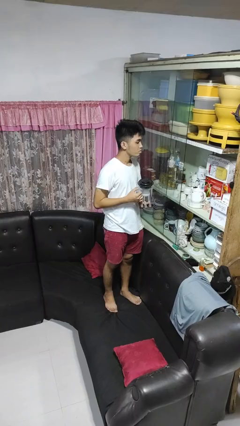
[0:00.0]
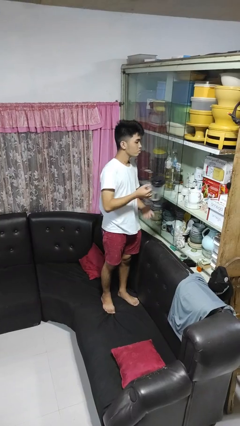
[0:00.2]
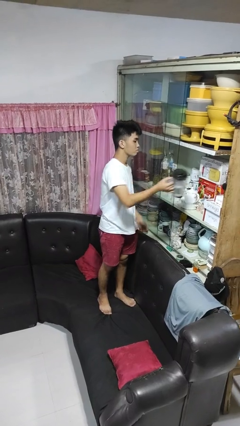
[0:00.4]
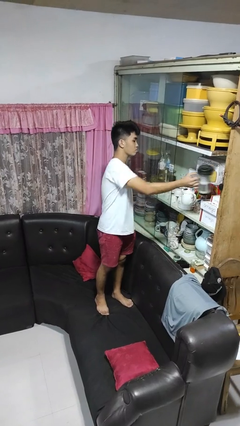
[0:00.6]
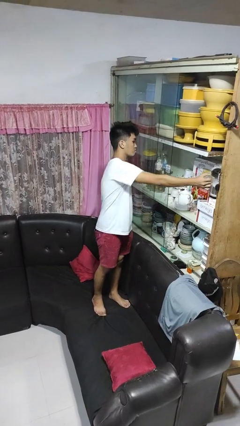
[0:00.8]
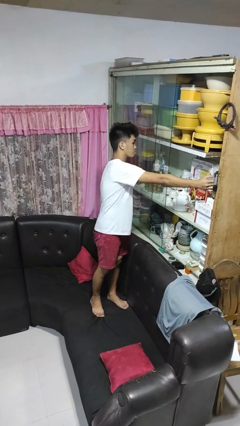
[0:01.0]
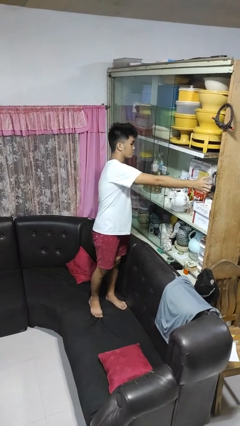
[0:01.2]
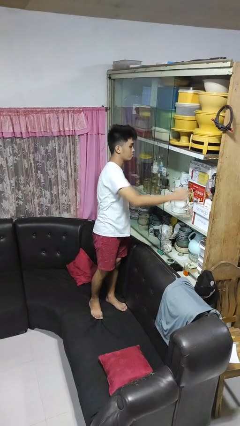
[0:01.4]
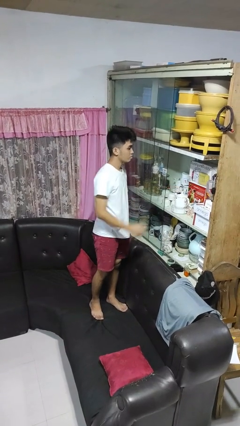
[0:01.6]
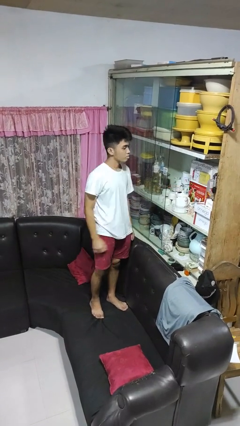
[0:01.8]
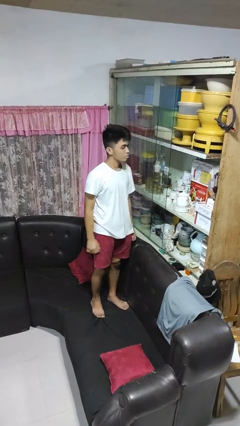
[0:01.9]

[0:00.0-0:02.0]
person puts down object into cabinet

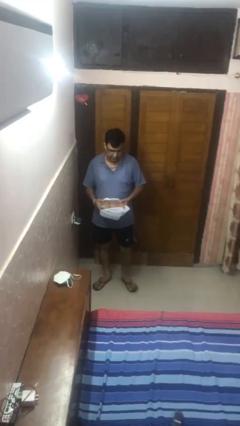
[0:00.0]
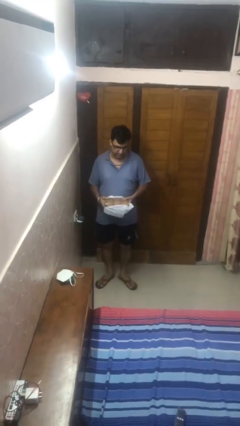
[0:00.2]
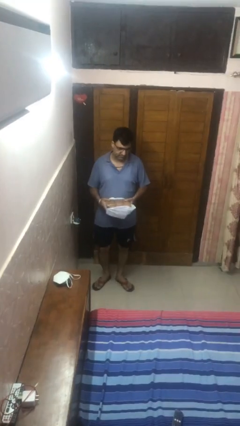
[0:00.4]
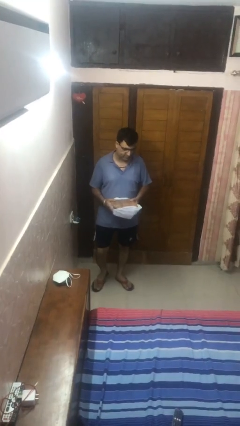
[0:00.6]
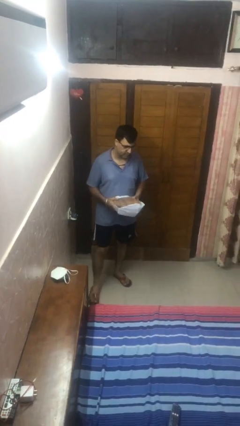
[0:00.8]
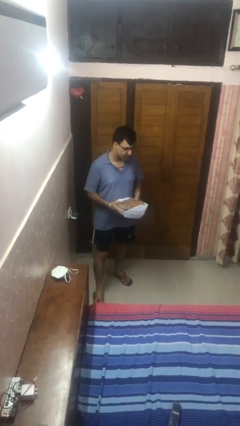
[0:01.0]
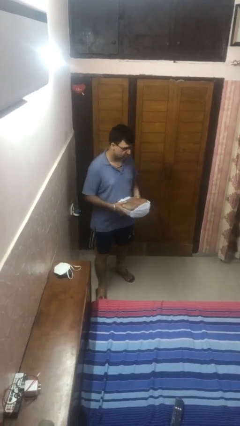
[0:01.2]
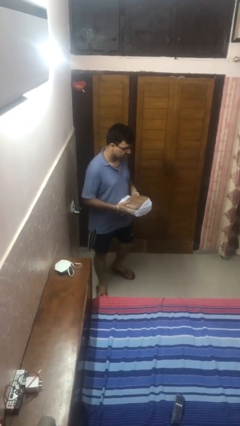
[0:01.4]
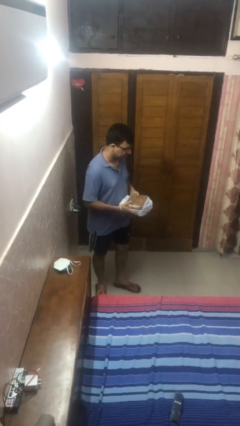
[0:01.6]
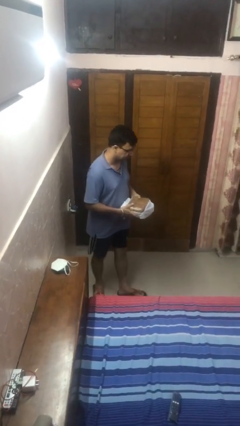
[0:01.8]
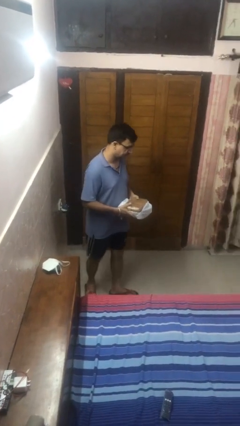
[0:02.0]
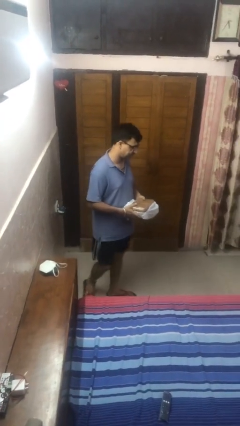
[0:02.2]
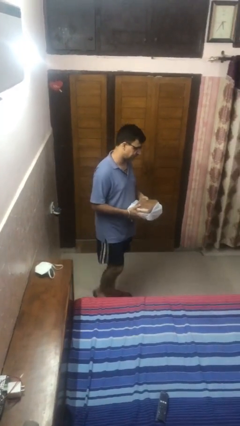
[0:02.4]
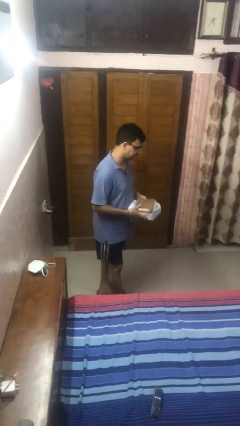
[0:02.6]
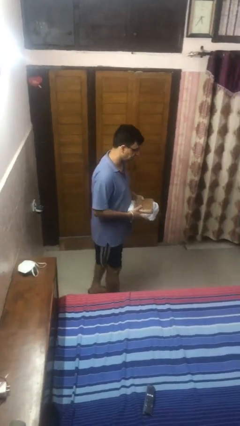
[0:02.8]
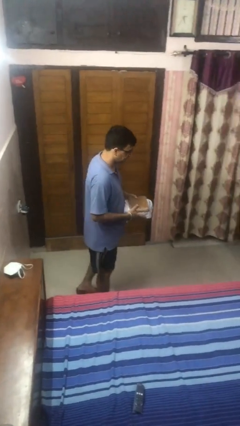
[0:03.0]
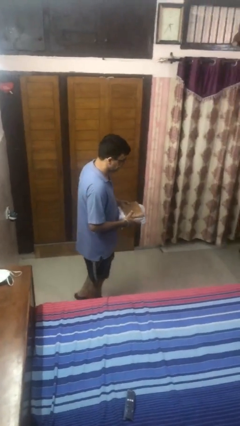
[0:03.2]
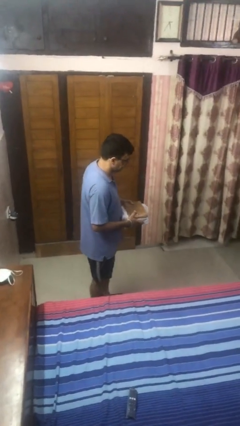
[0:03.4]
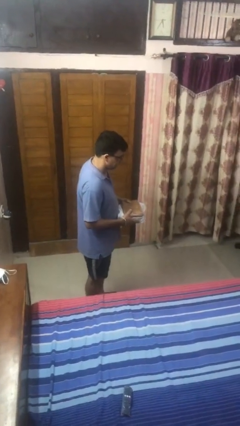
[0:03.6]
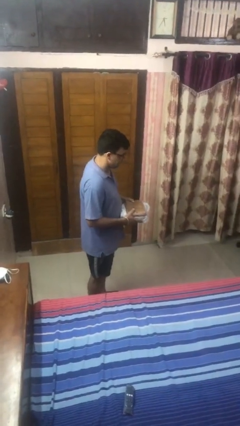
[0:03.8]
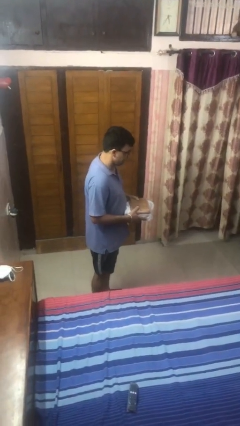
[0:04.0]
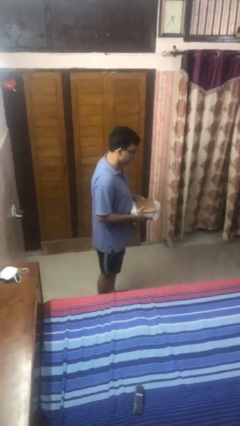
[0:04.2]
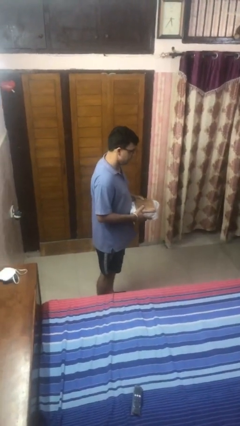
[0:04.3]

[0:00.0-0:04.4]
person carries groceries

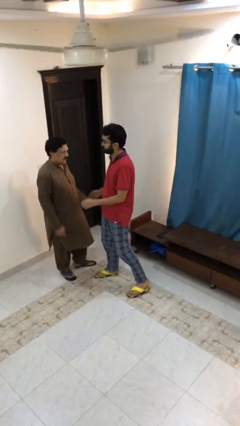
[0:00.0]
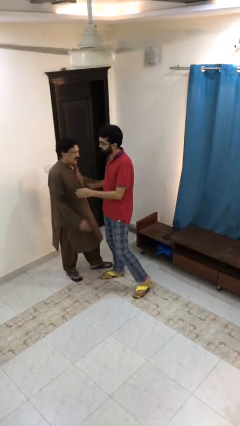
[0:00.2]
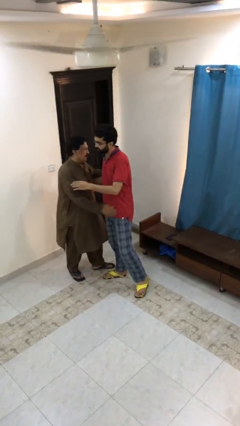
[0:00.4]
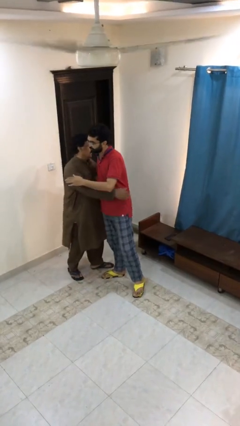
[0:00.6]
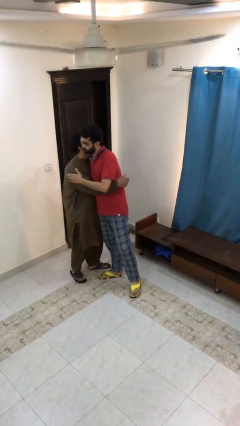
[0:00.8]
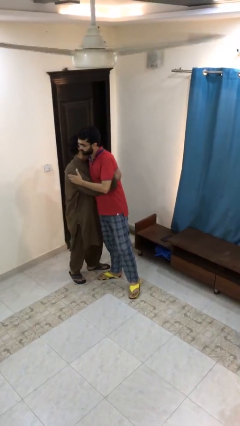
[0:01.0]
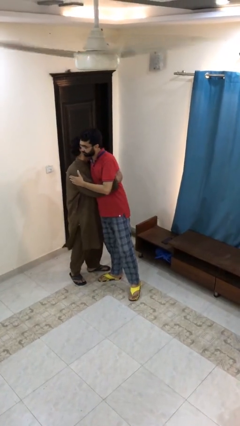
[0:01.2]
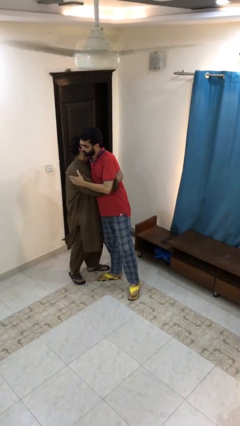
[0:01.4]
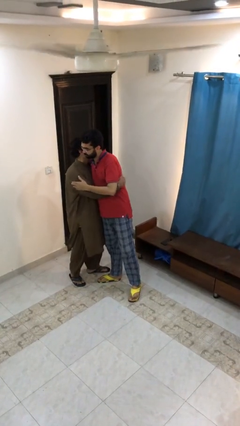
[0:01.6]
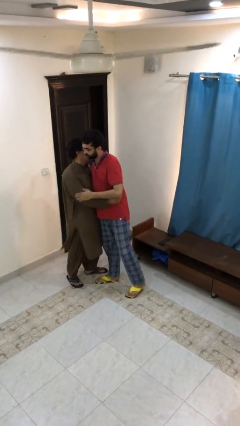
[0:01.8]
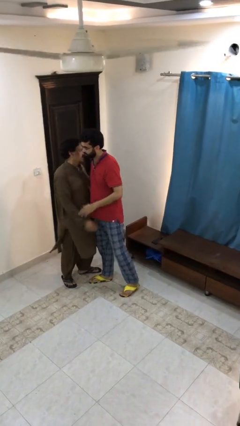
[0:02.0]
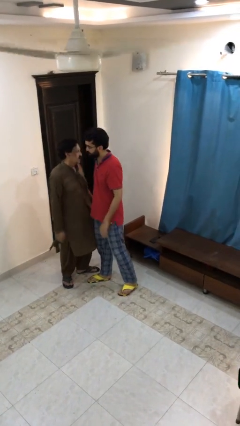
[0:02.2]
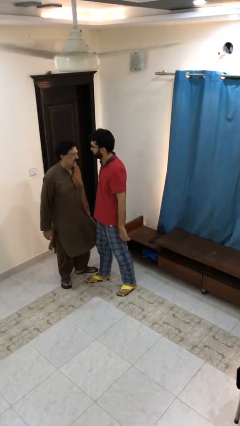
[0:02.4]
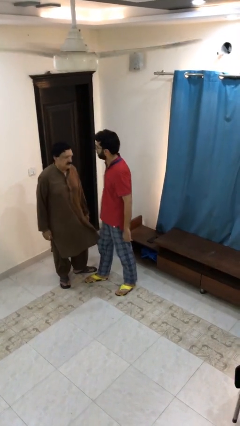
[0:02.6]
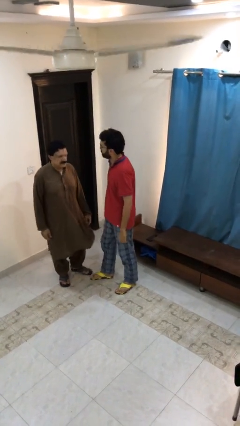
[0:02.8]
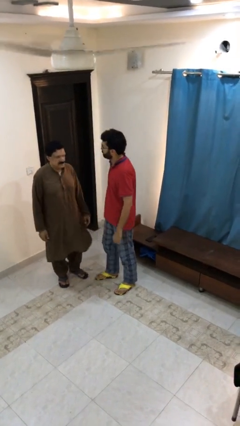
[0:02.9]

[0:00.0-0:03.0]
person embraces person

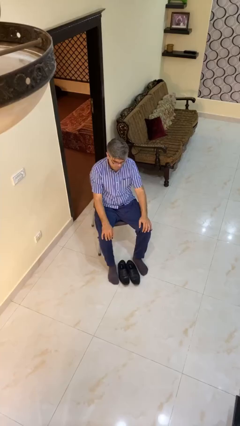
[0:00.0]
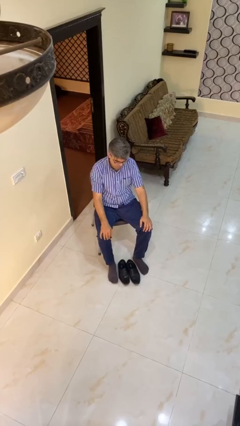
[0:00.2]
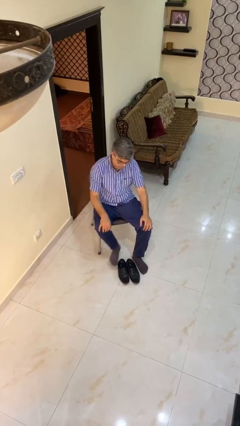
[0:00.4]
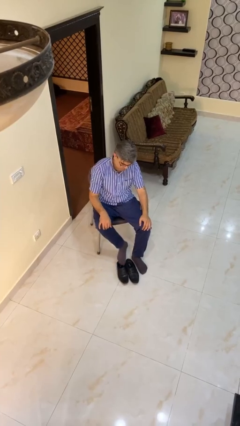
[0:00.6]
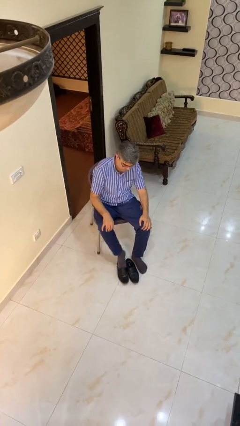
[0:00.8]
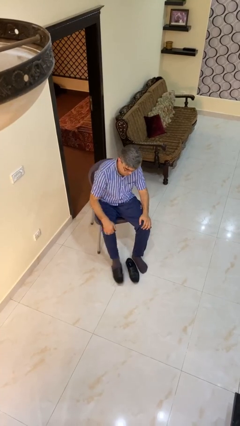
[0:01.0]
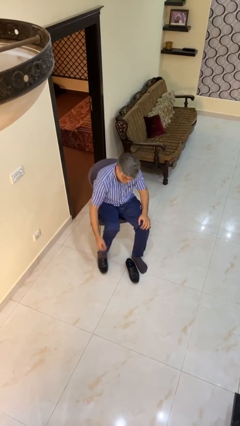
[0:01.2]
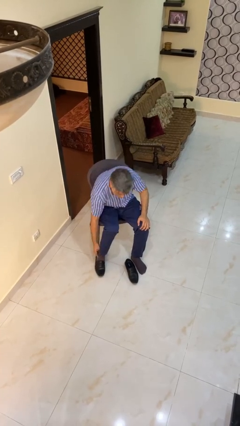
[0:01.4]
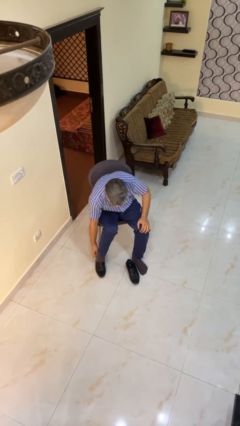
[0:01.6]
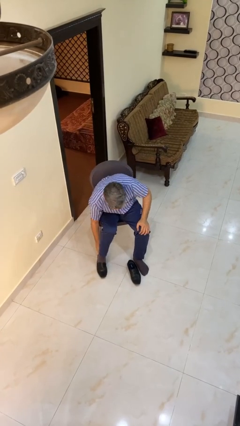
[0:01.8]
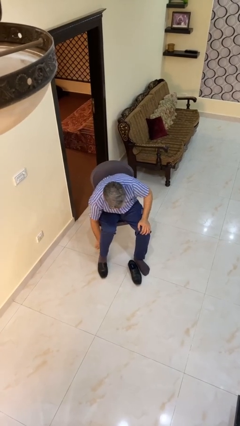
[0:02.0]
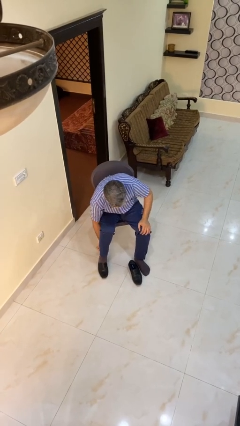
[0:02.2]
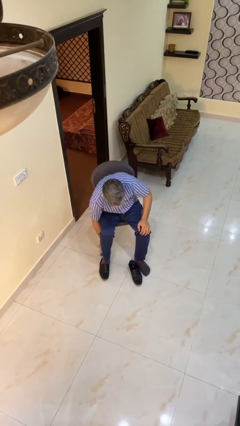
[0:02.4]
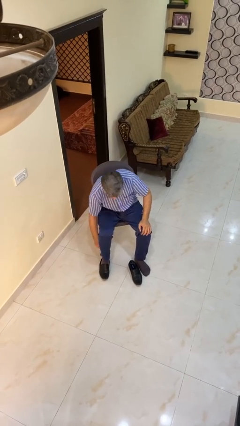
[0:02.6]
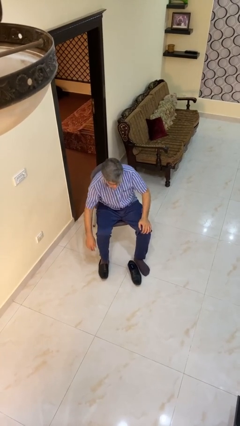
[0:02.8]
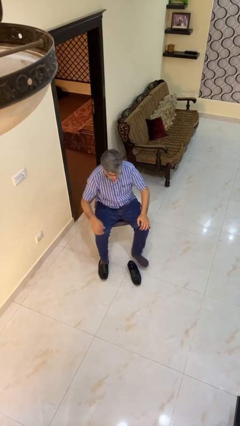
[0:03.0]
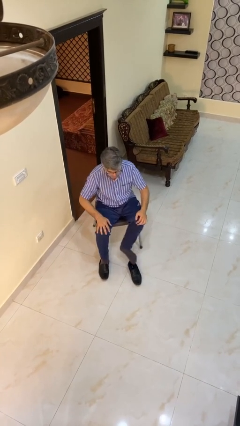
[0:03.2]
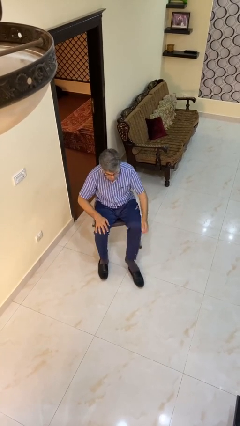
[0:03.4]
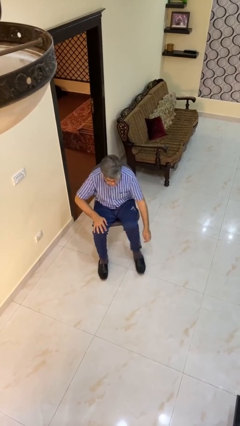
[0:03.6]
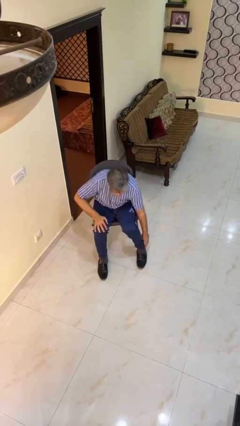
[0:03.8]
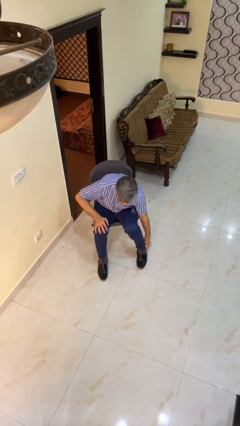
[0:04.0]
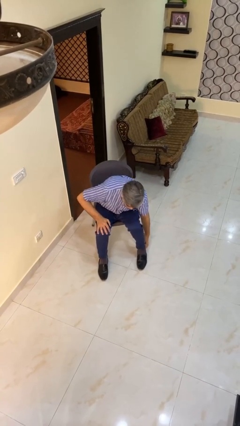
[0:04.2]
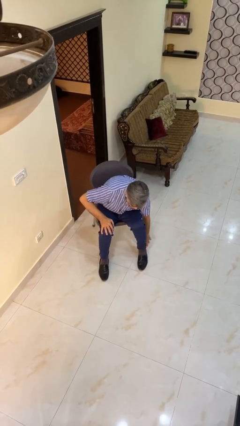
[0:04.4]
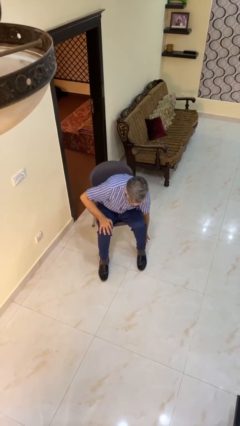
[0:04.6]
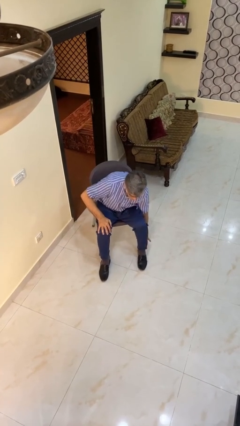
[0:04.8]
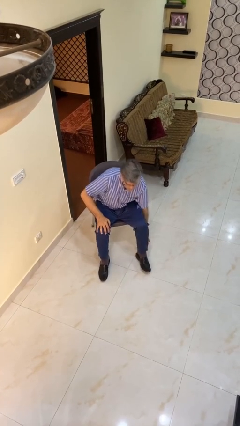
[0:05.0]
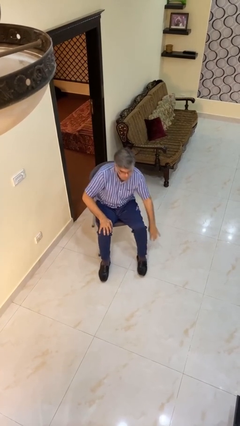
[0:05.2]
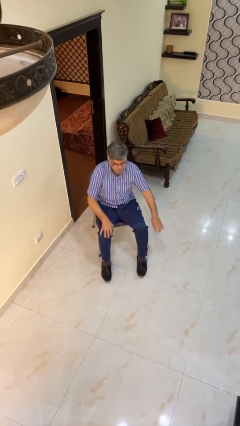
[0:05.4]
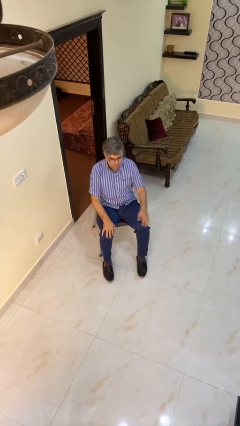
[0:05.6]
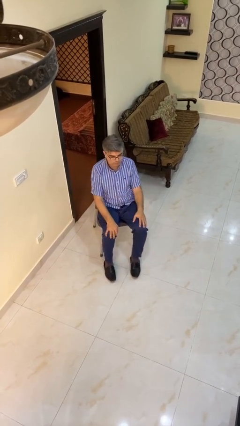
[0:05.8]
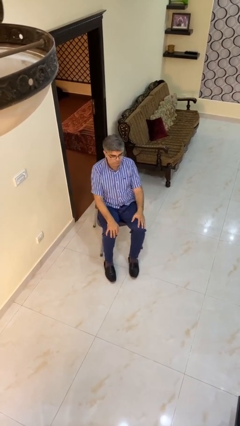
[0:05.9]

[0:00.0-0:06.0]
person puts on boots

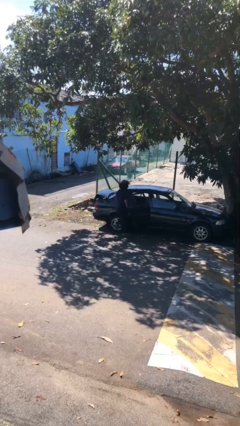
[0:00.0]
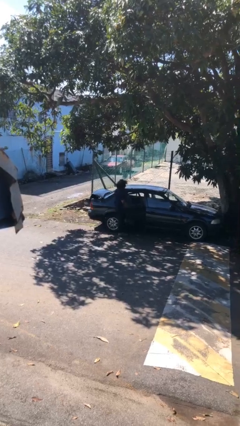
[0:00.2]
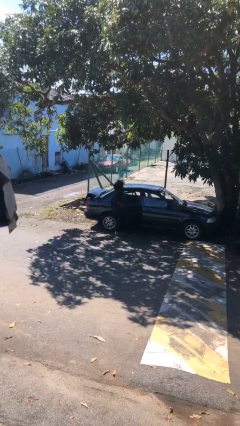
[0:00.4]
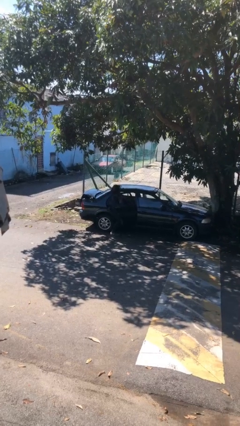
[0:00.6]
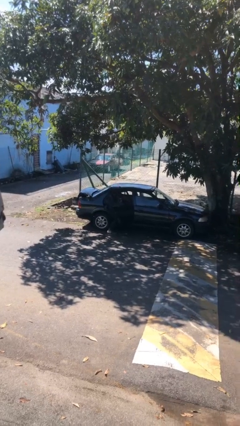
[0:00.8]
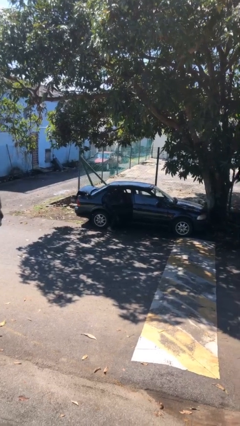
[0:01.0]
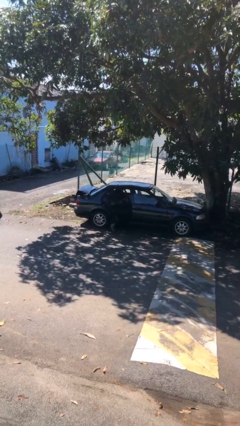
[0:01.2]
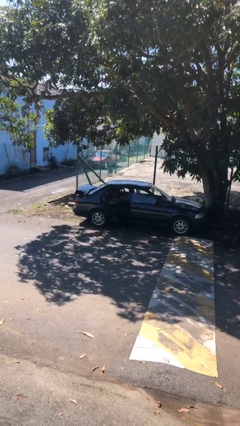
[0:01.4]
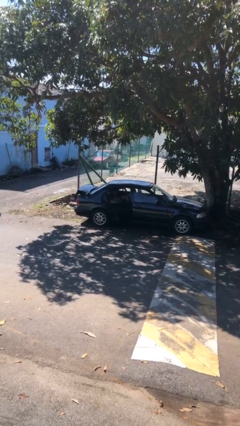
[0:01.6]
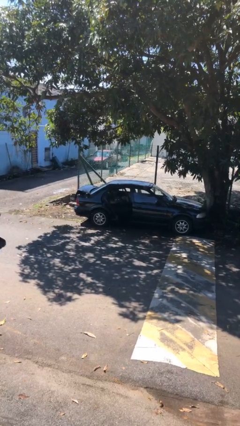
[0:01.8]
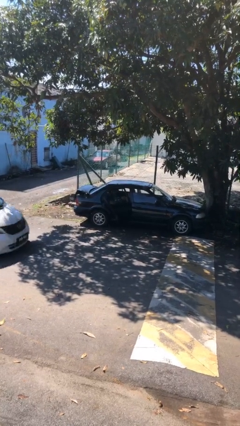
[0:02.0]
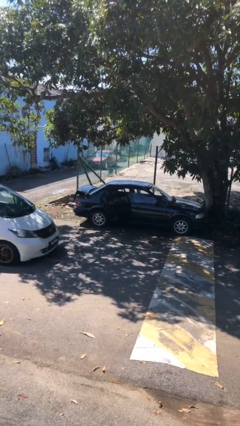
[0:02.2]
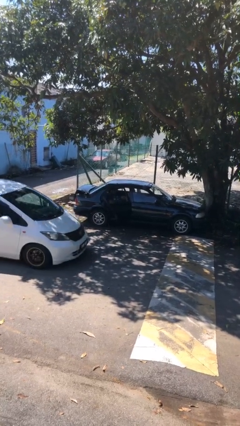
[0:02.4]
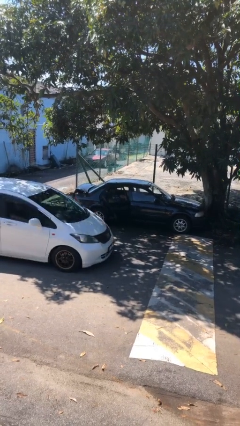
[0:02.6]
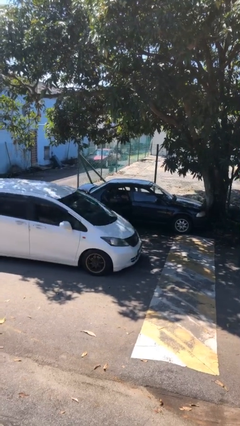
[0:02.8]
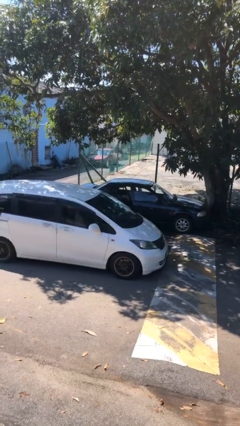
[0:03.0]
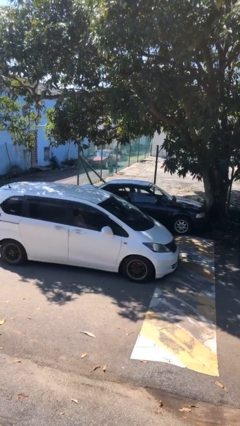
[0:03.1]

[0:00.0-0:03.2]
person enters car
